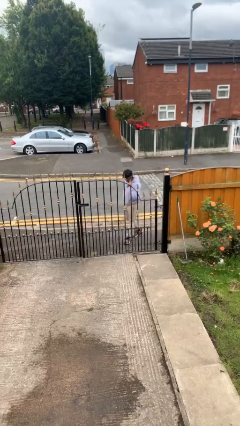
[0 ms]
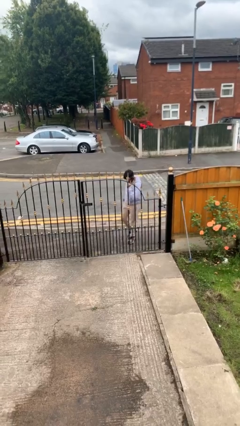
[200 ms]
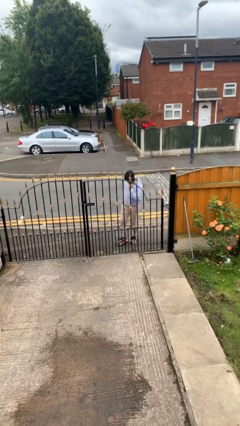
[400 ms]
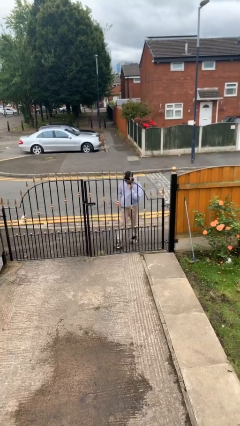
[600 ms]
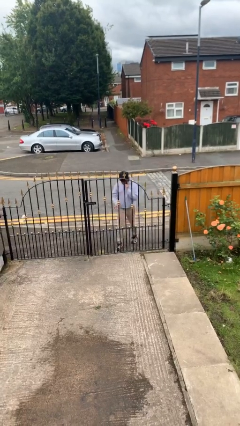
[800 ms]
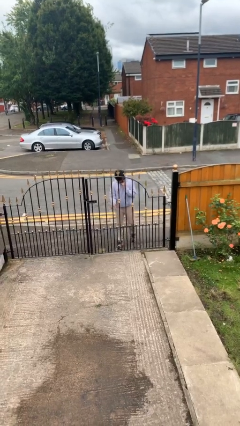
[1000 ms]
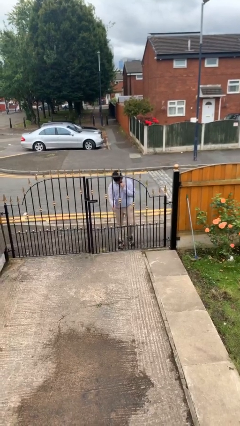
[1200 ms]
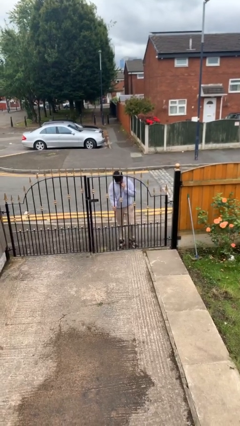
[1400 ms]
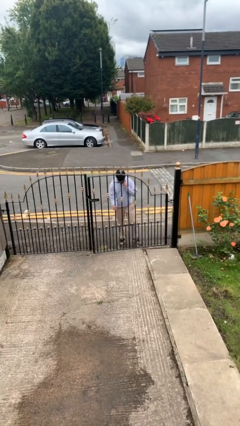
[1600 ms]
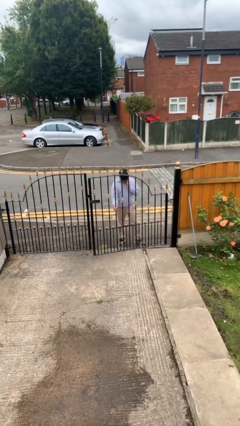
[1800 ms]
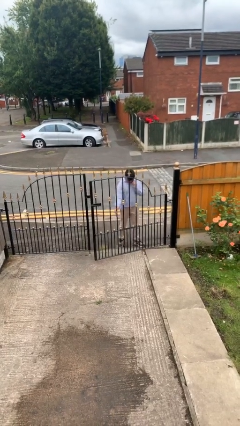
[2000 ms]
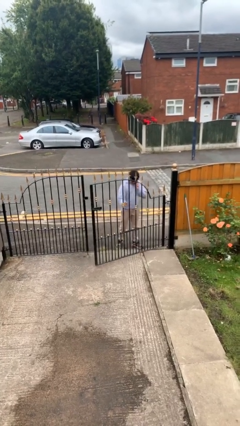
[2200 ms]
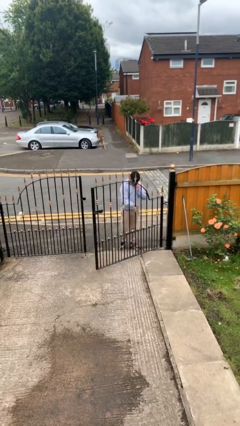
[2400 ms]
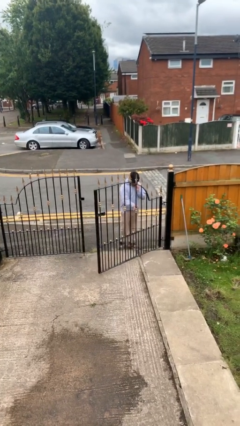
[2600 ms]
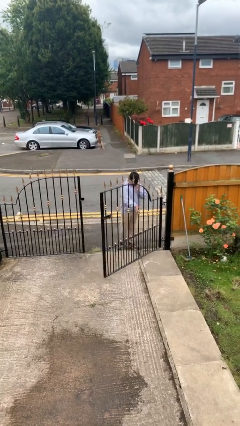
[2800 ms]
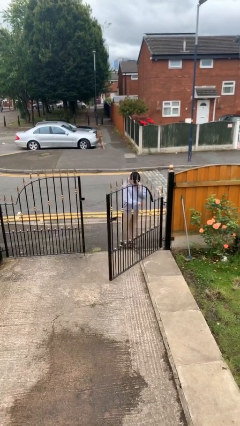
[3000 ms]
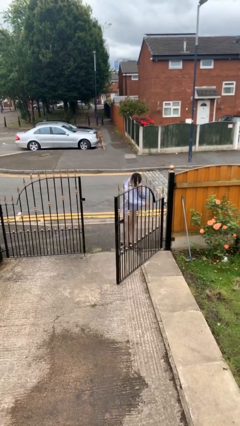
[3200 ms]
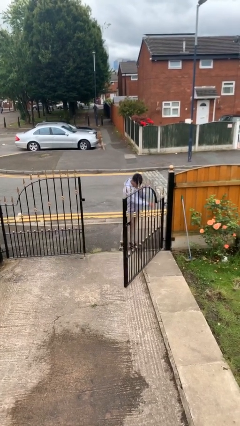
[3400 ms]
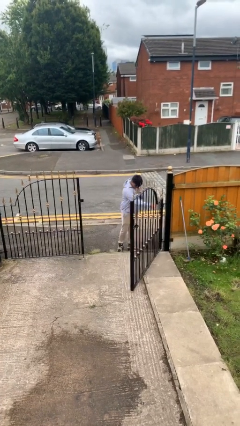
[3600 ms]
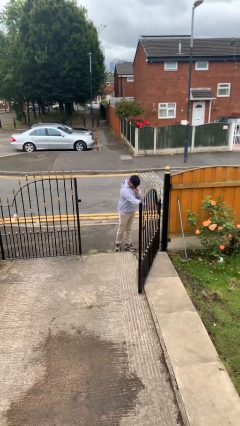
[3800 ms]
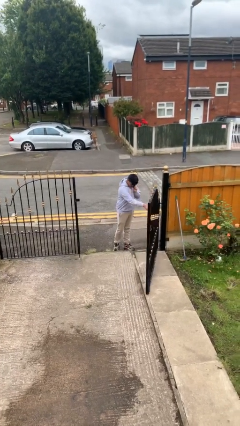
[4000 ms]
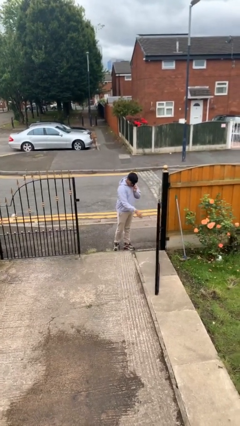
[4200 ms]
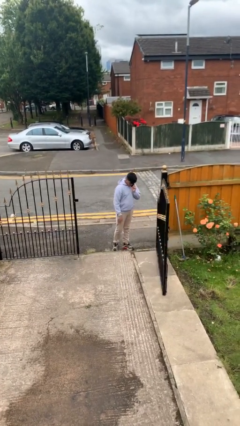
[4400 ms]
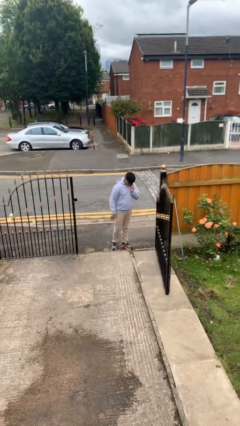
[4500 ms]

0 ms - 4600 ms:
person opens facility door

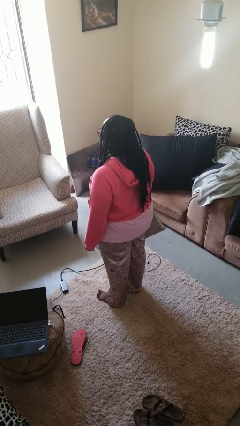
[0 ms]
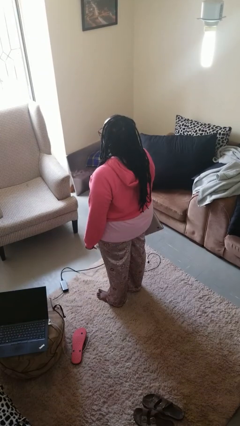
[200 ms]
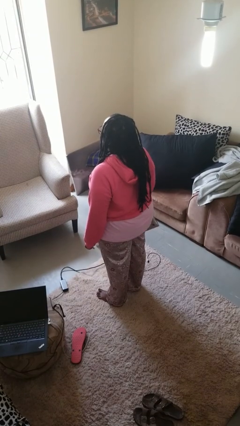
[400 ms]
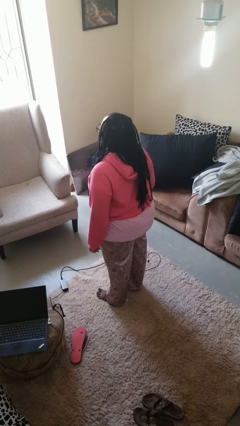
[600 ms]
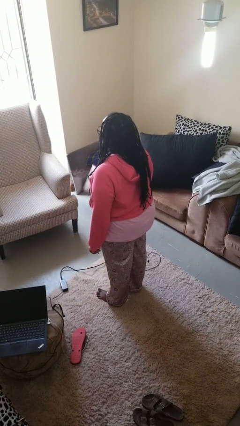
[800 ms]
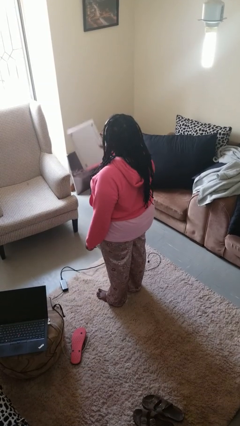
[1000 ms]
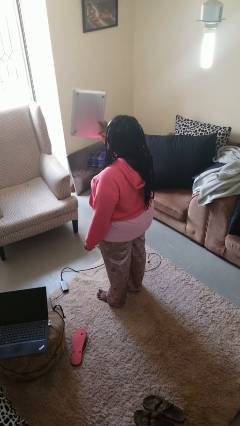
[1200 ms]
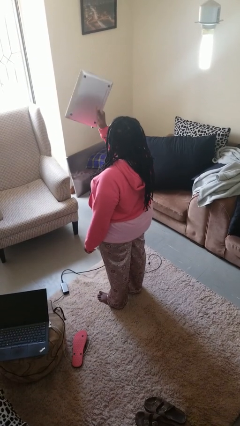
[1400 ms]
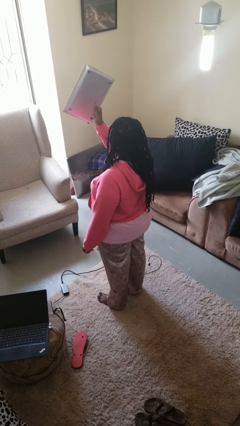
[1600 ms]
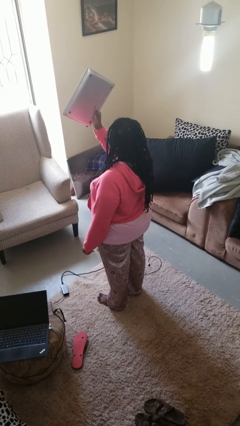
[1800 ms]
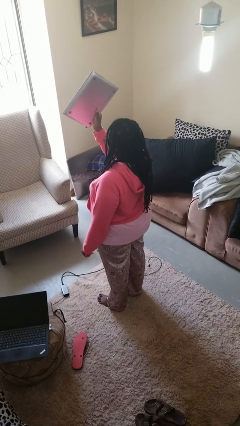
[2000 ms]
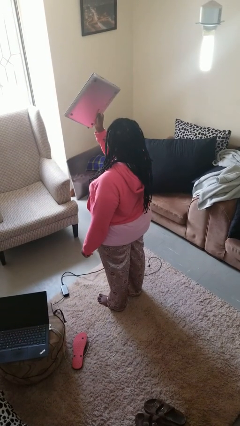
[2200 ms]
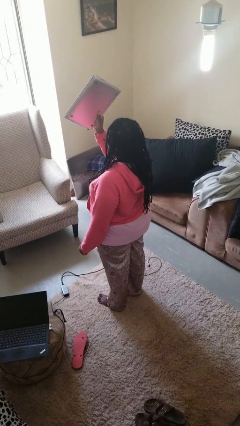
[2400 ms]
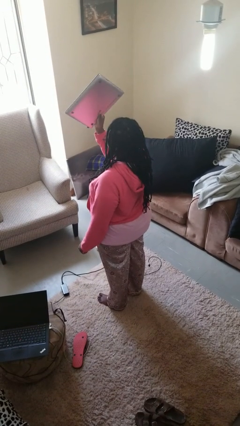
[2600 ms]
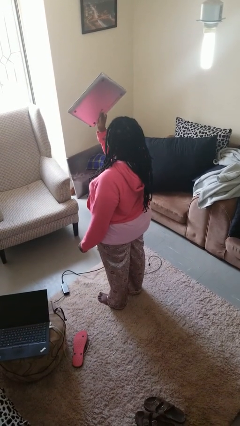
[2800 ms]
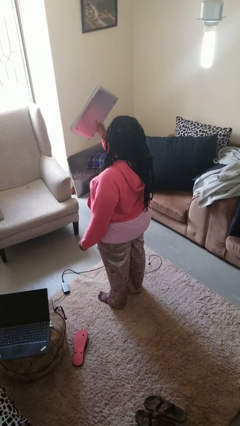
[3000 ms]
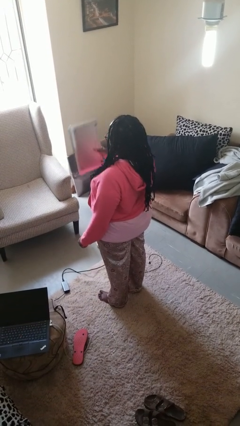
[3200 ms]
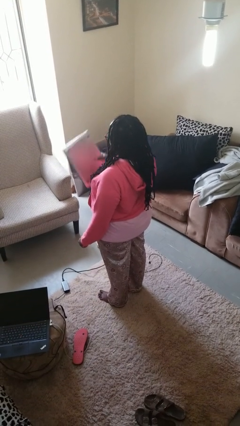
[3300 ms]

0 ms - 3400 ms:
person holds object above head

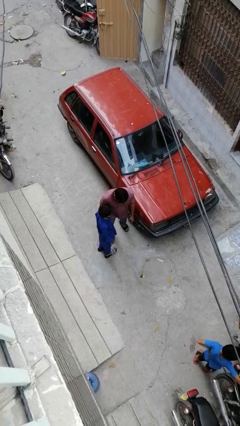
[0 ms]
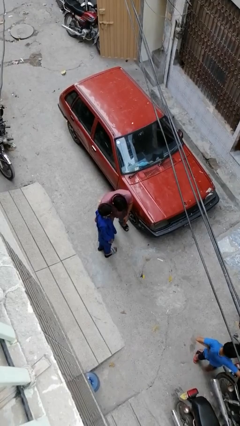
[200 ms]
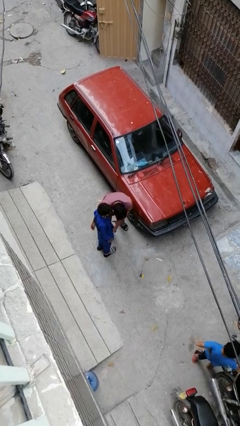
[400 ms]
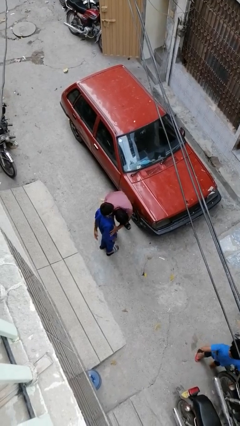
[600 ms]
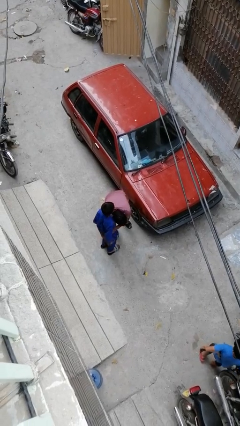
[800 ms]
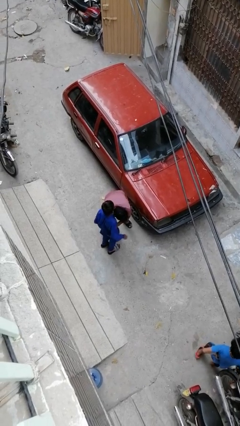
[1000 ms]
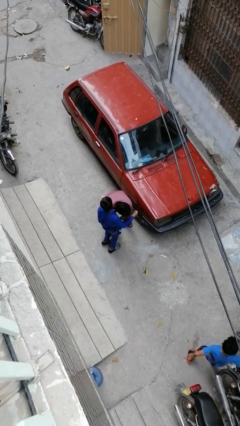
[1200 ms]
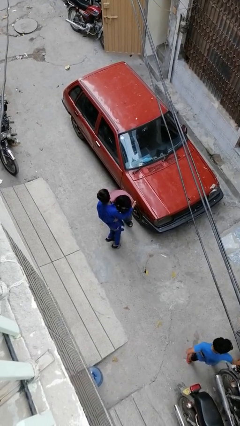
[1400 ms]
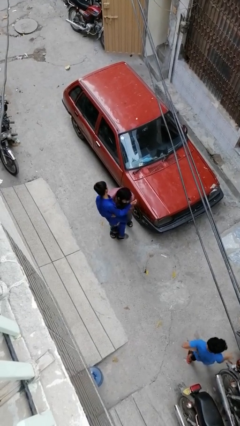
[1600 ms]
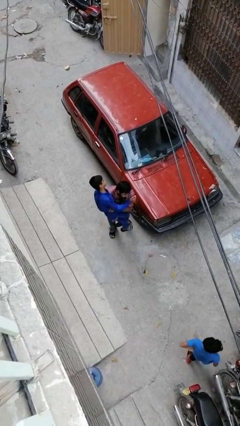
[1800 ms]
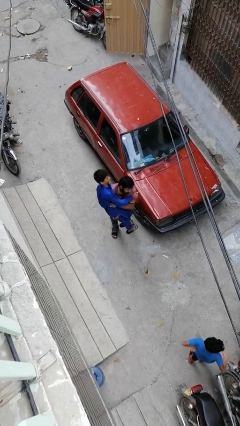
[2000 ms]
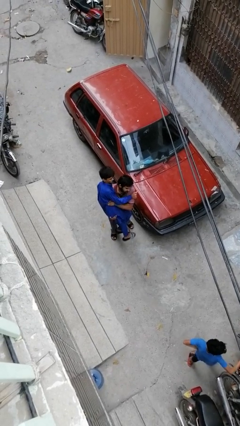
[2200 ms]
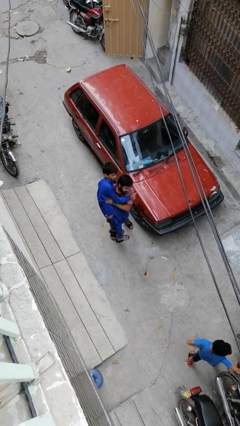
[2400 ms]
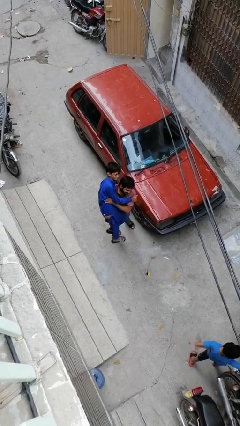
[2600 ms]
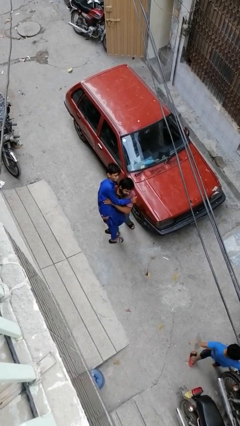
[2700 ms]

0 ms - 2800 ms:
person picks up person

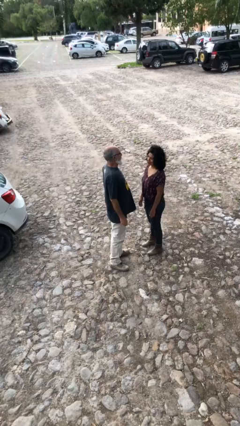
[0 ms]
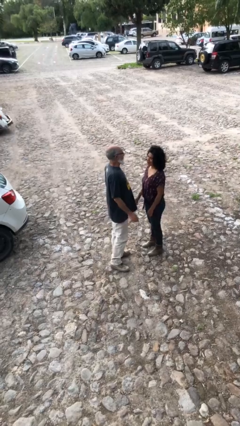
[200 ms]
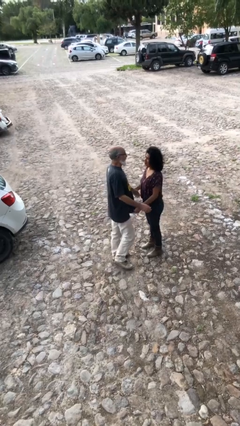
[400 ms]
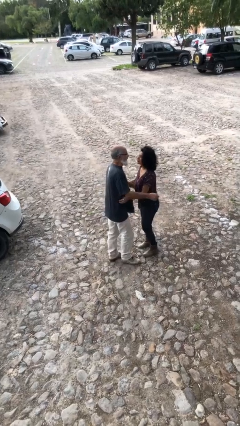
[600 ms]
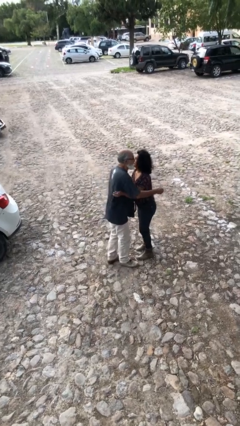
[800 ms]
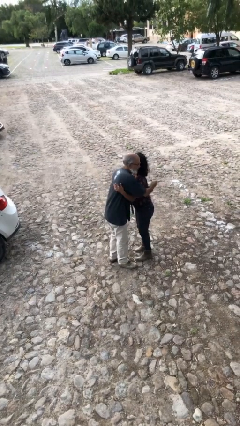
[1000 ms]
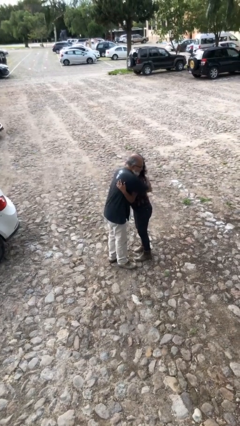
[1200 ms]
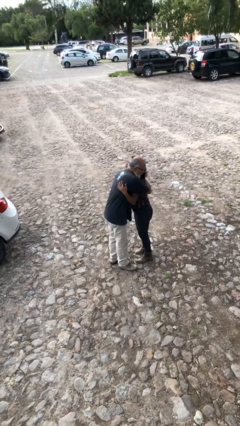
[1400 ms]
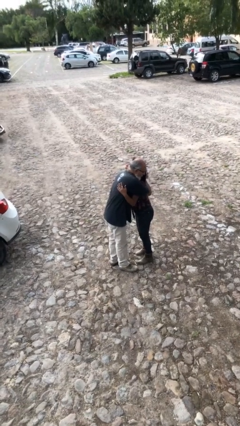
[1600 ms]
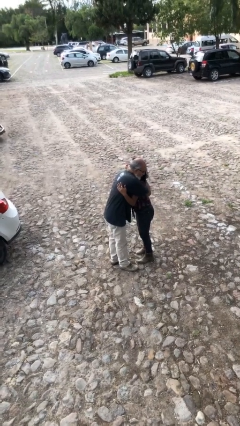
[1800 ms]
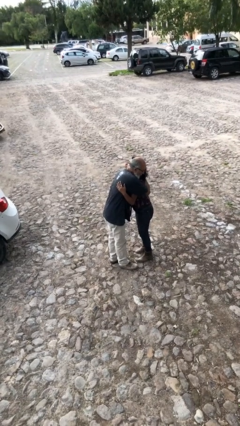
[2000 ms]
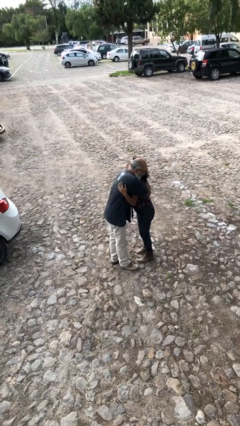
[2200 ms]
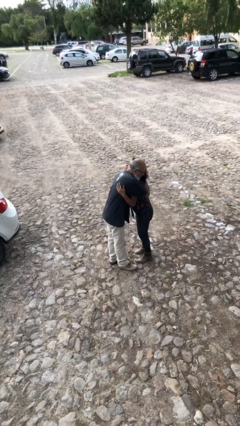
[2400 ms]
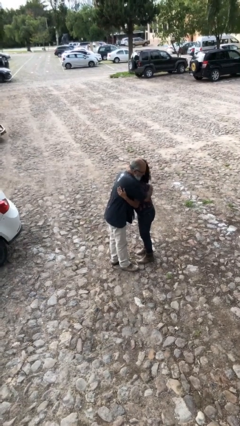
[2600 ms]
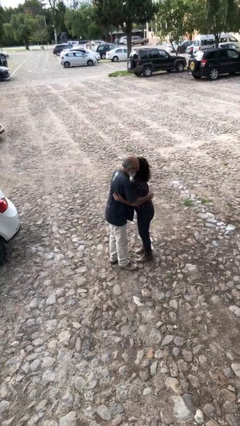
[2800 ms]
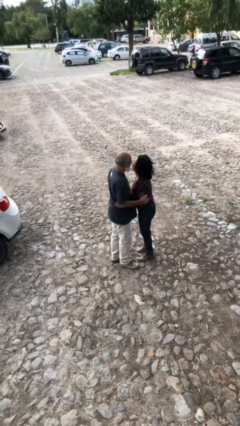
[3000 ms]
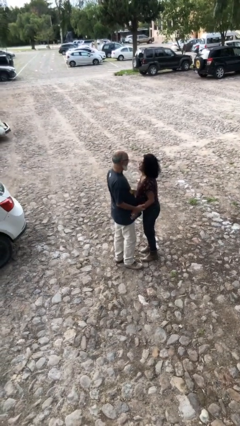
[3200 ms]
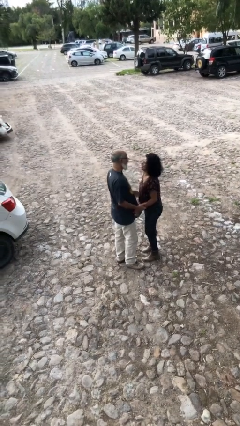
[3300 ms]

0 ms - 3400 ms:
person embraces person

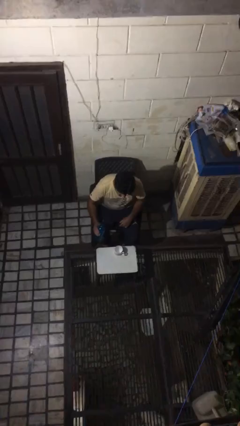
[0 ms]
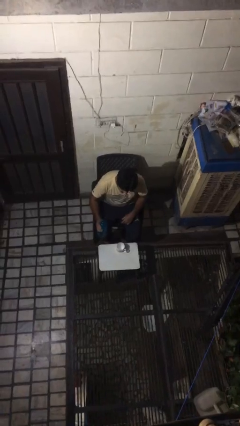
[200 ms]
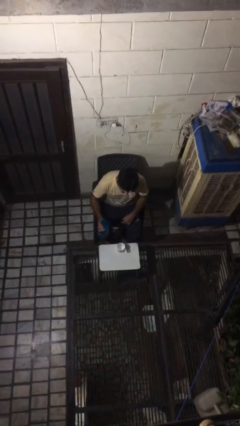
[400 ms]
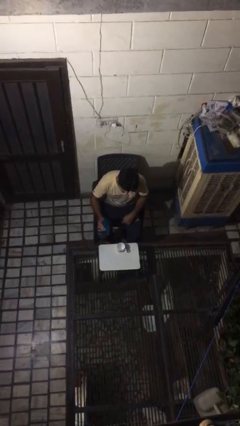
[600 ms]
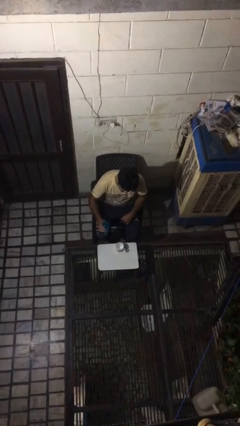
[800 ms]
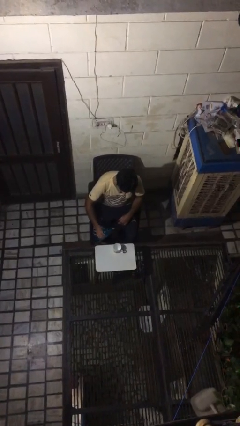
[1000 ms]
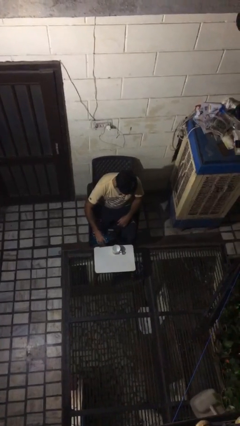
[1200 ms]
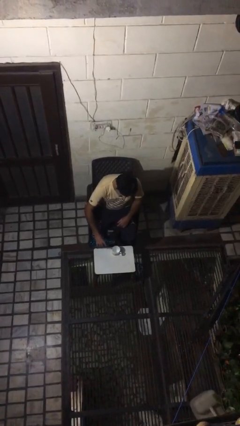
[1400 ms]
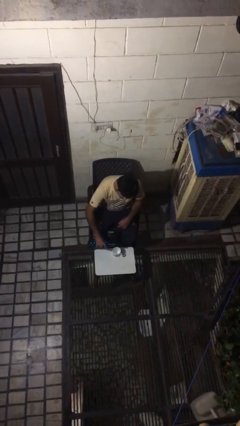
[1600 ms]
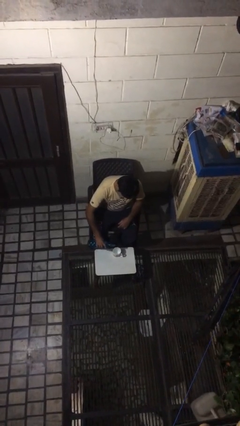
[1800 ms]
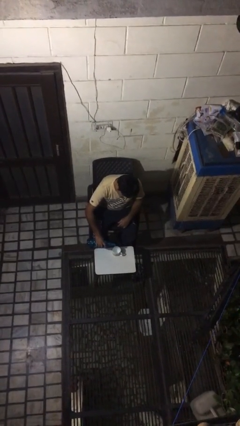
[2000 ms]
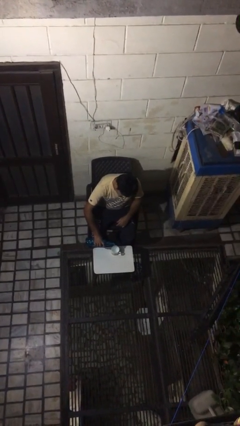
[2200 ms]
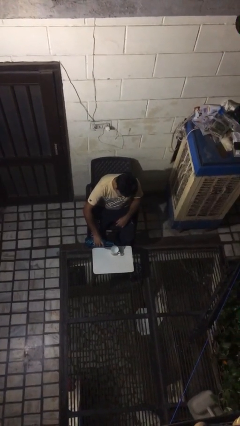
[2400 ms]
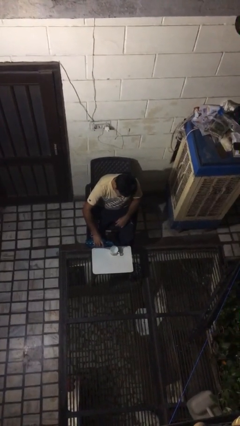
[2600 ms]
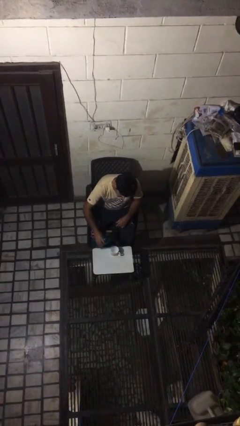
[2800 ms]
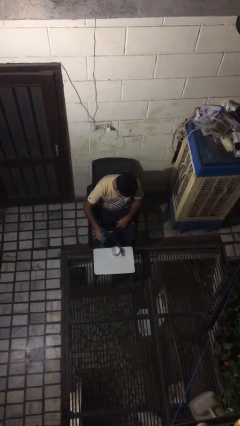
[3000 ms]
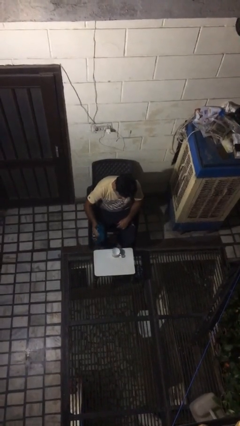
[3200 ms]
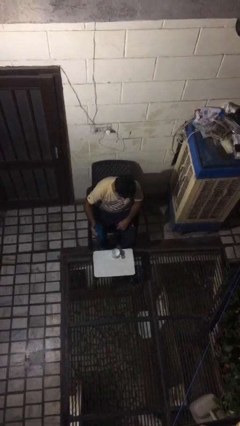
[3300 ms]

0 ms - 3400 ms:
person pours liquid into cup
